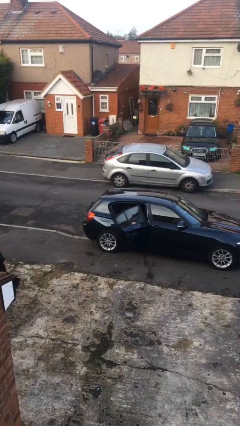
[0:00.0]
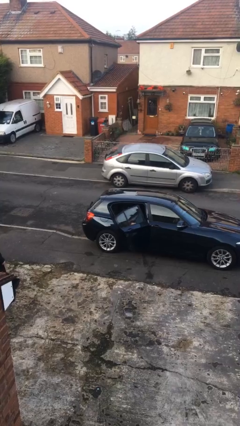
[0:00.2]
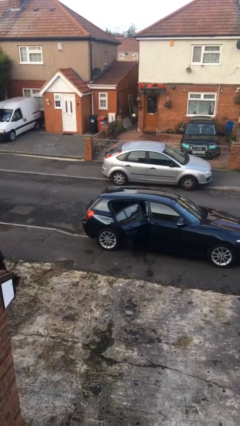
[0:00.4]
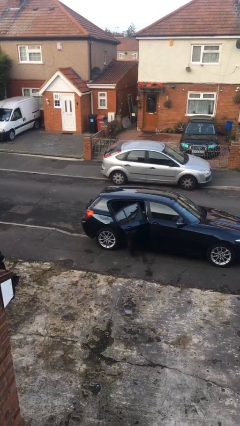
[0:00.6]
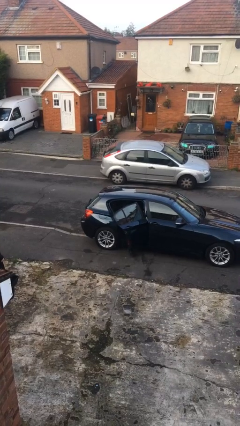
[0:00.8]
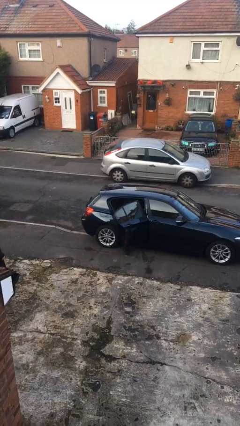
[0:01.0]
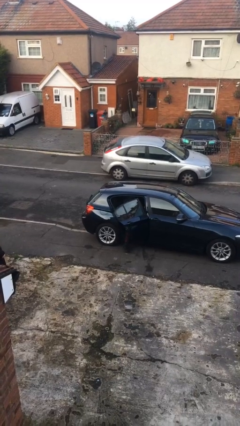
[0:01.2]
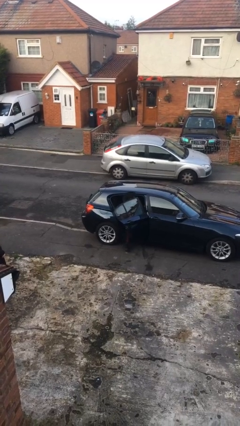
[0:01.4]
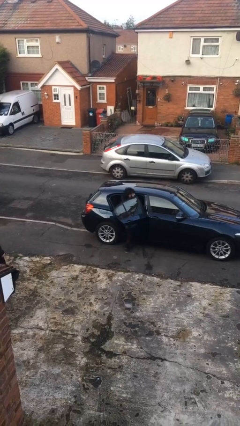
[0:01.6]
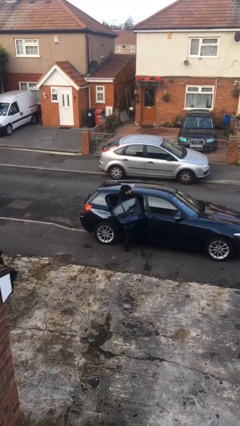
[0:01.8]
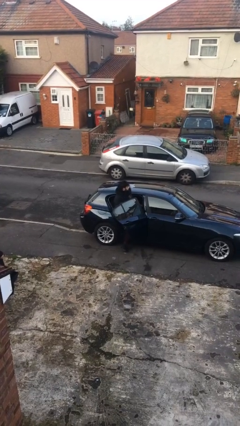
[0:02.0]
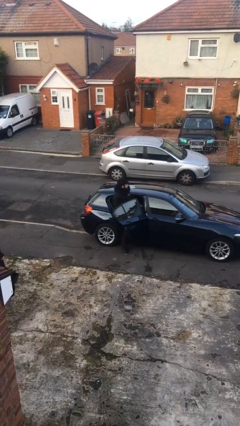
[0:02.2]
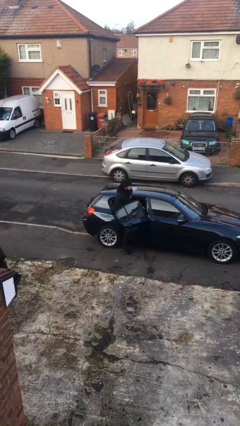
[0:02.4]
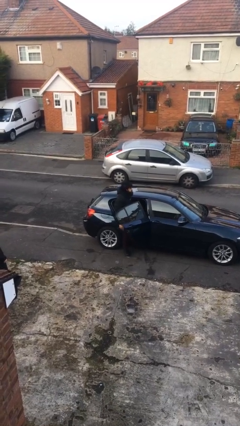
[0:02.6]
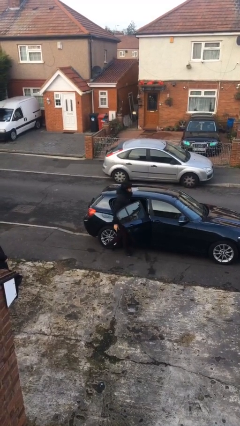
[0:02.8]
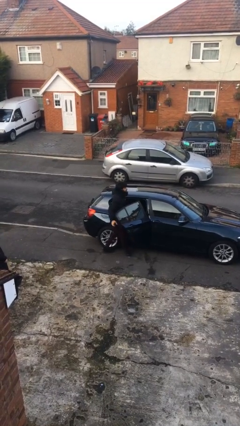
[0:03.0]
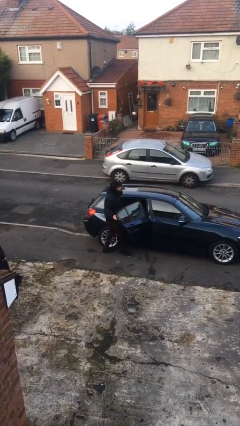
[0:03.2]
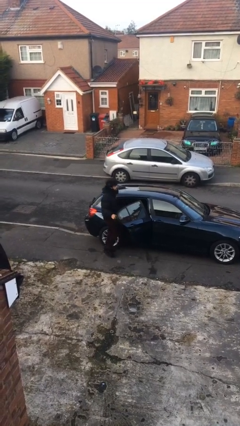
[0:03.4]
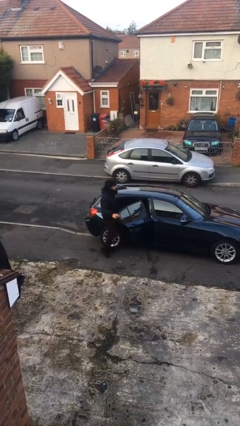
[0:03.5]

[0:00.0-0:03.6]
person exits car

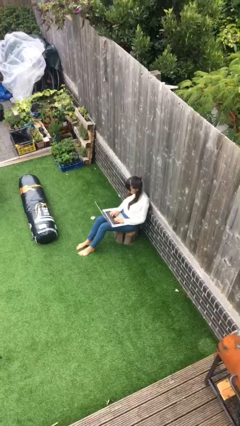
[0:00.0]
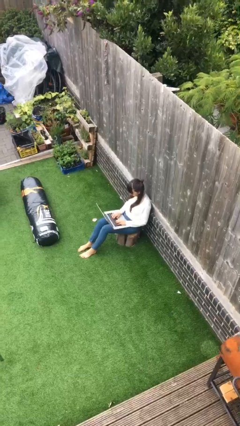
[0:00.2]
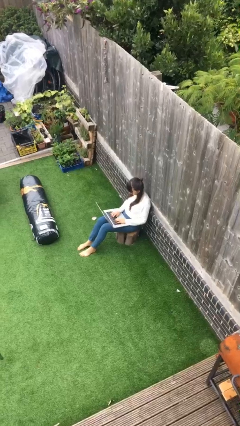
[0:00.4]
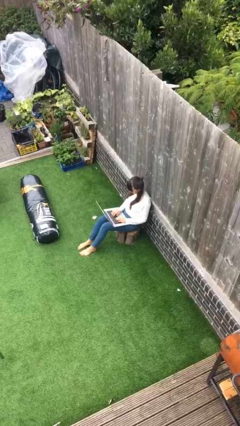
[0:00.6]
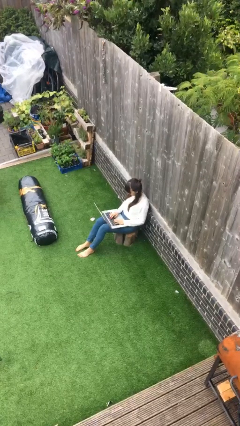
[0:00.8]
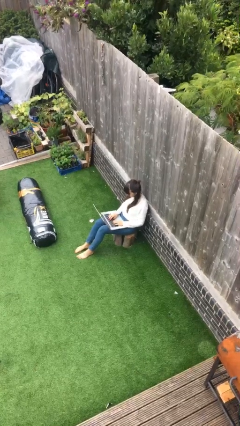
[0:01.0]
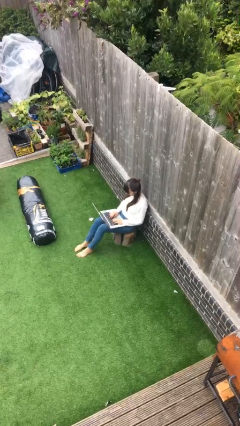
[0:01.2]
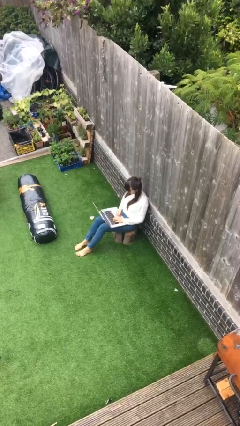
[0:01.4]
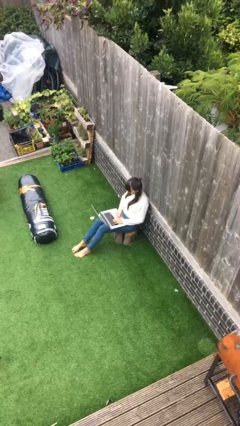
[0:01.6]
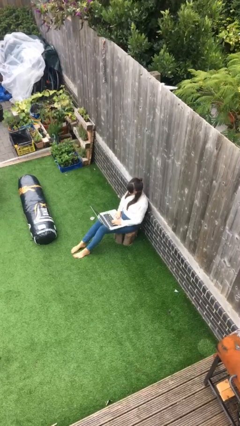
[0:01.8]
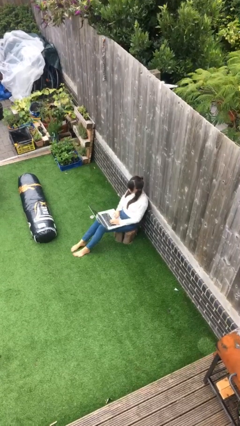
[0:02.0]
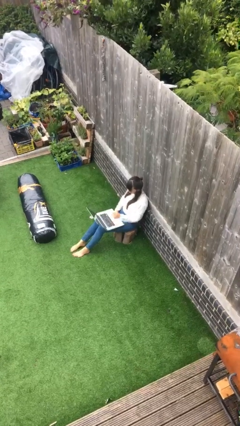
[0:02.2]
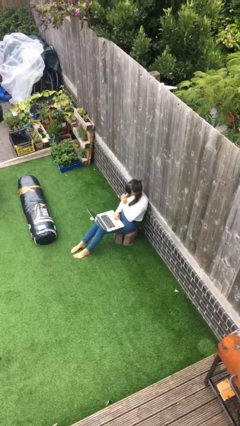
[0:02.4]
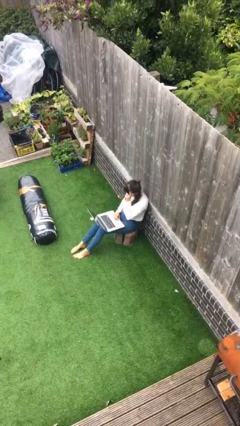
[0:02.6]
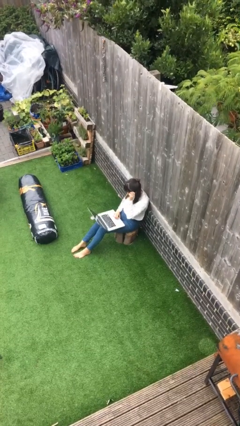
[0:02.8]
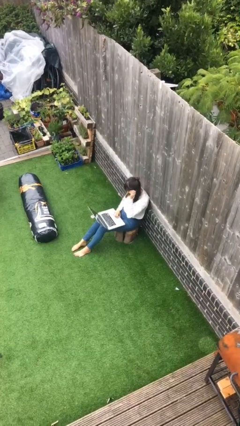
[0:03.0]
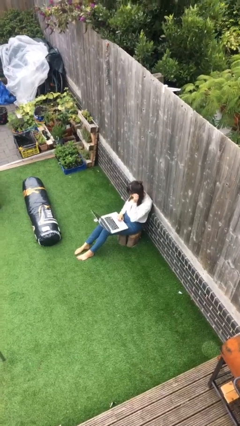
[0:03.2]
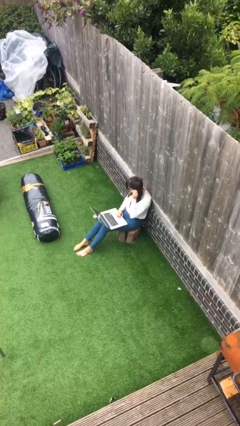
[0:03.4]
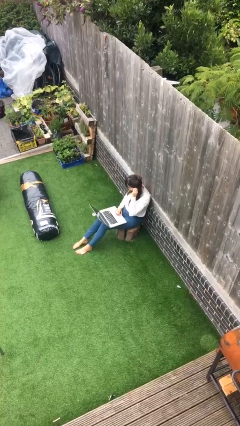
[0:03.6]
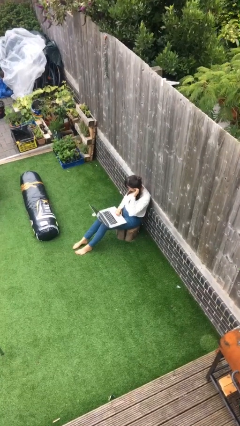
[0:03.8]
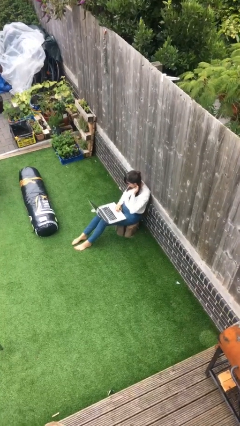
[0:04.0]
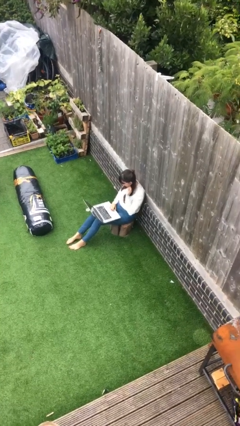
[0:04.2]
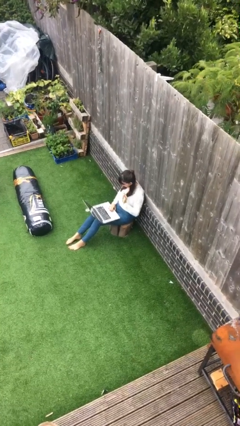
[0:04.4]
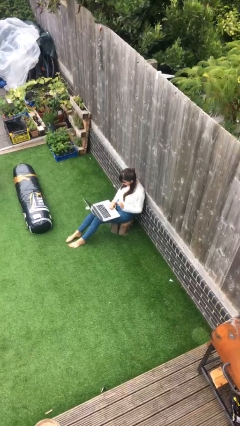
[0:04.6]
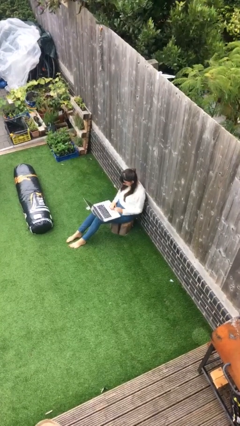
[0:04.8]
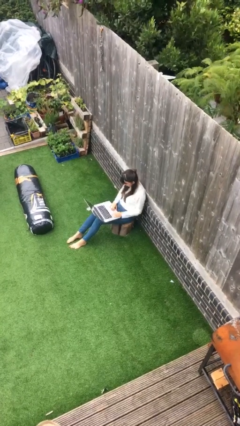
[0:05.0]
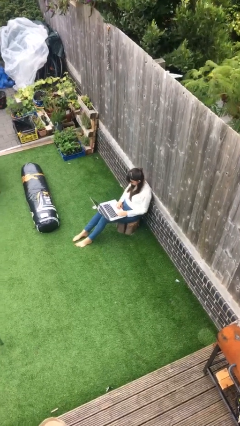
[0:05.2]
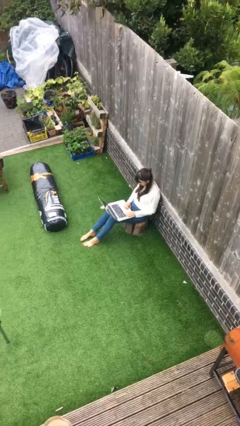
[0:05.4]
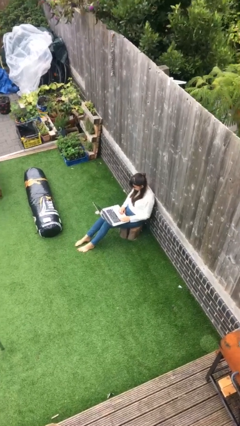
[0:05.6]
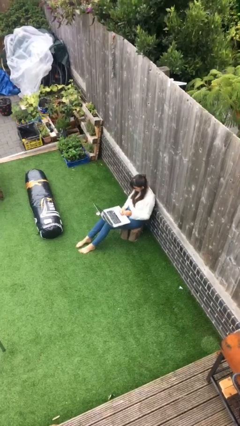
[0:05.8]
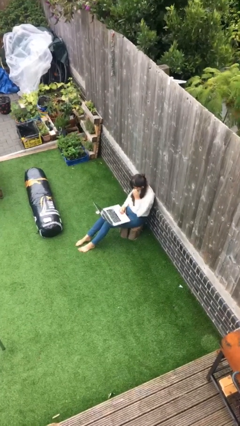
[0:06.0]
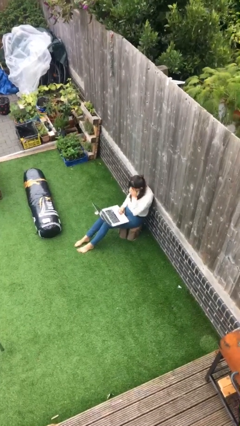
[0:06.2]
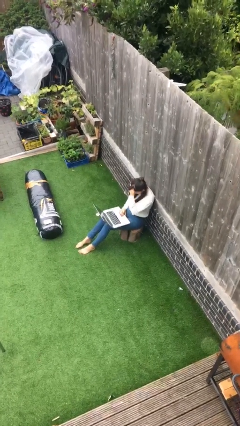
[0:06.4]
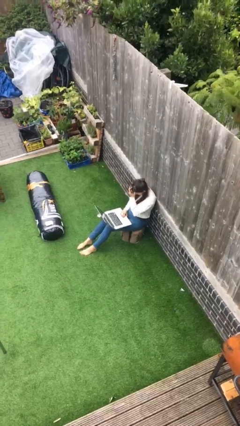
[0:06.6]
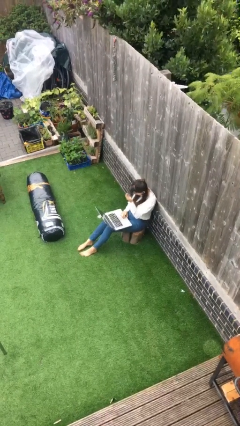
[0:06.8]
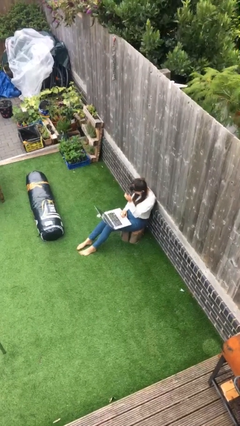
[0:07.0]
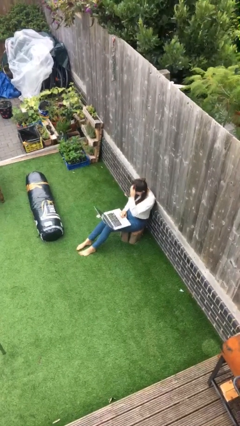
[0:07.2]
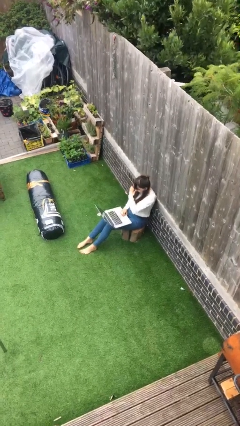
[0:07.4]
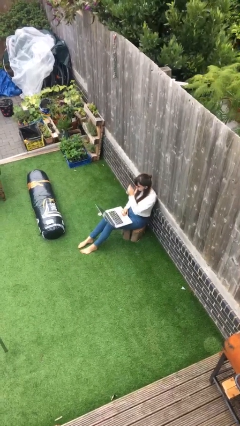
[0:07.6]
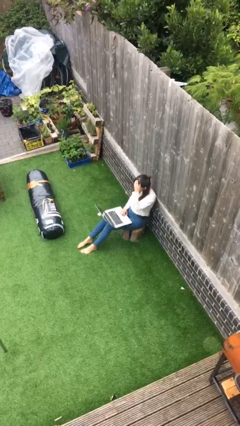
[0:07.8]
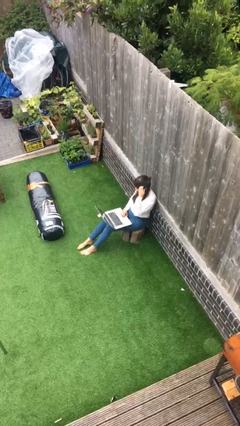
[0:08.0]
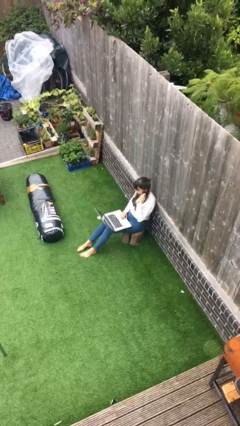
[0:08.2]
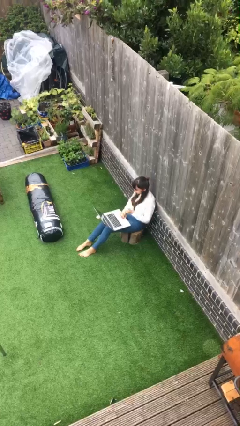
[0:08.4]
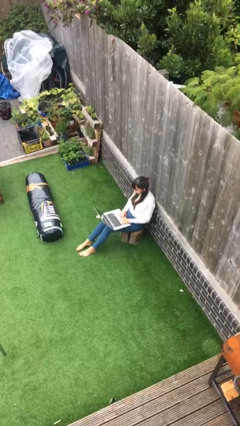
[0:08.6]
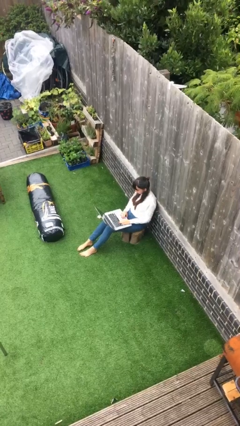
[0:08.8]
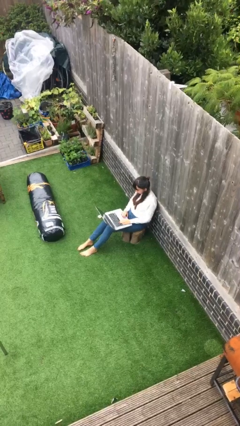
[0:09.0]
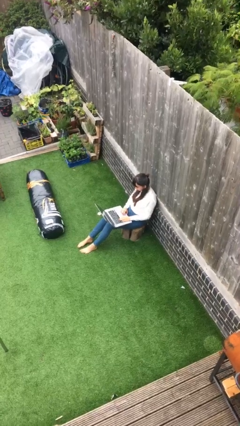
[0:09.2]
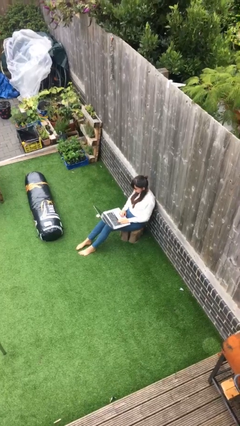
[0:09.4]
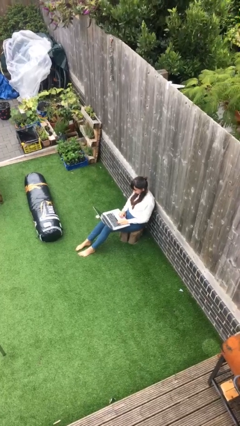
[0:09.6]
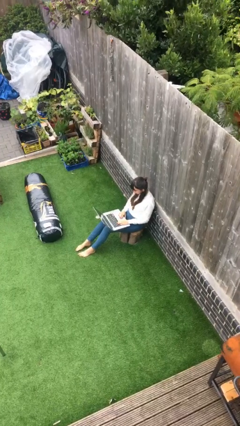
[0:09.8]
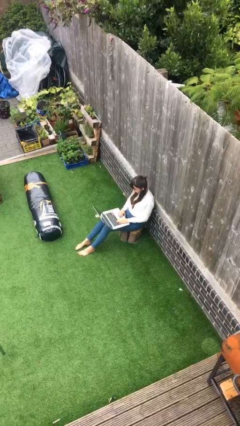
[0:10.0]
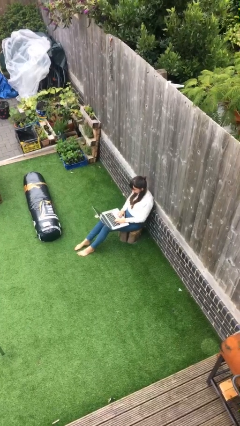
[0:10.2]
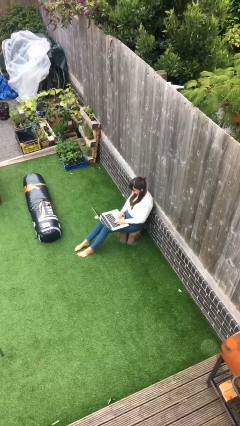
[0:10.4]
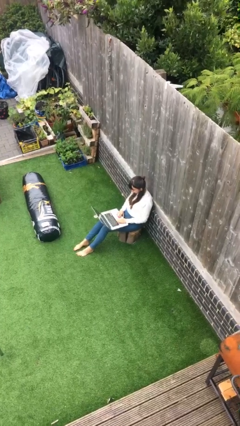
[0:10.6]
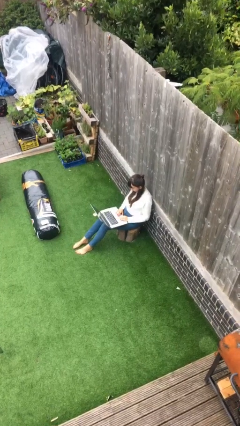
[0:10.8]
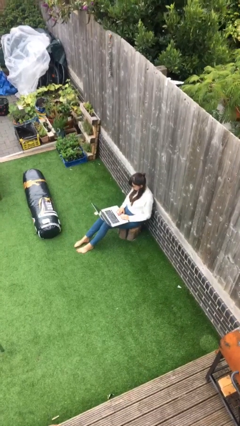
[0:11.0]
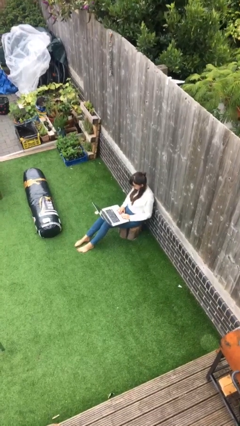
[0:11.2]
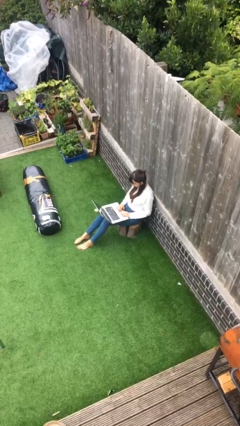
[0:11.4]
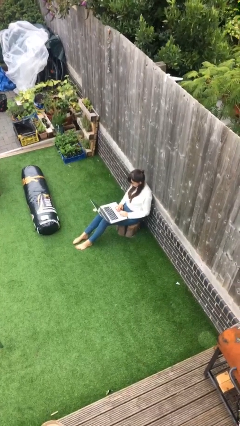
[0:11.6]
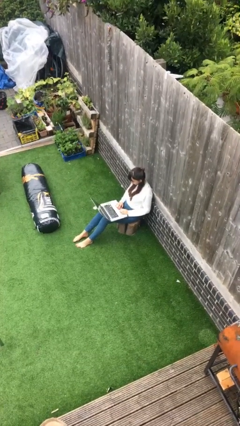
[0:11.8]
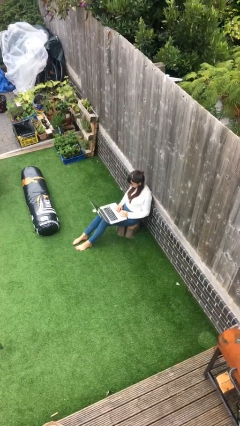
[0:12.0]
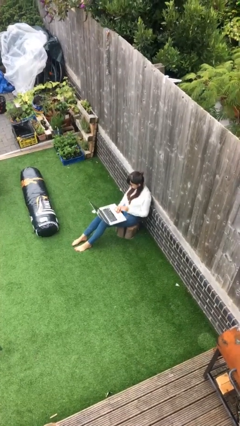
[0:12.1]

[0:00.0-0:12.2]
person interacts with laptop

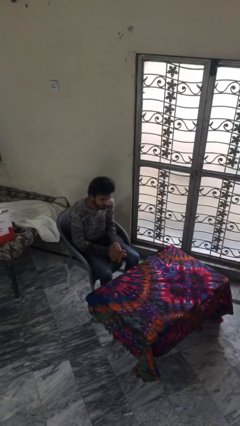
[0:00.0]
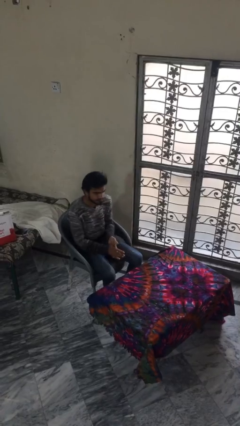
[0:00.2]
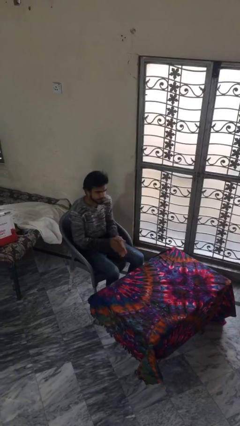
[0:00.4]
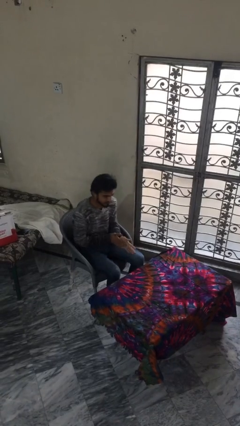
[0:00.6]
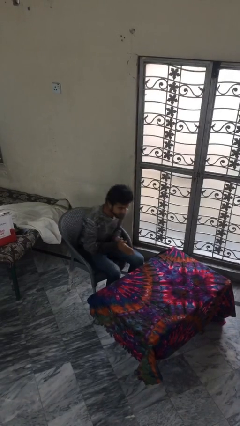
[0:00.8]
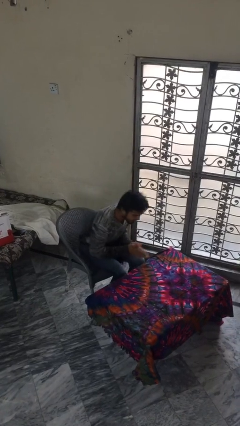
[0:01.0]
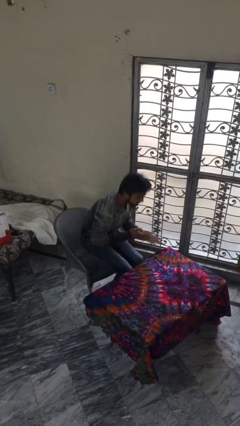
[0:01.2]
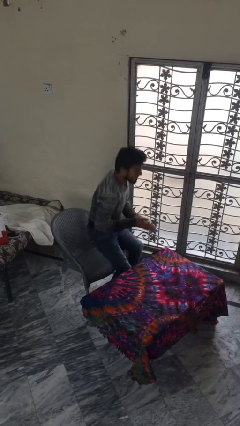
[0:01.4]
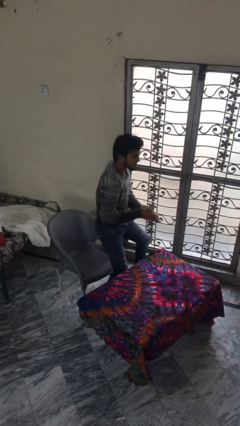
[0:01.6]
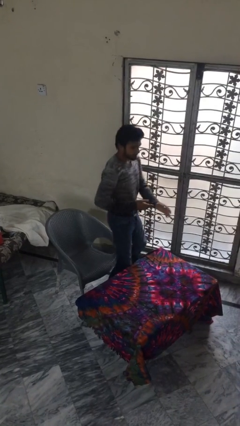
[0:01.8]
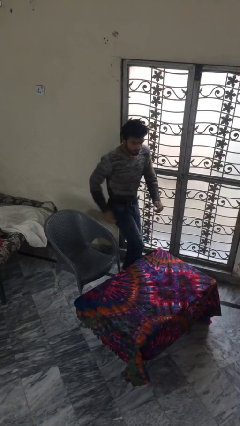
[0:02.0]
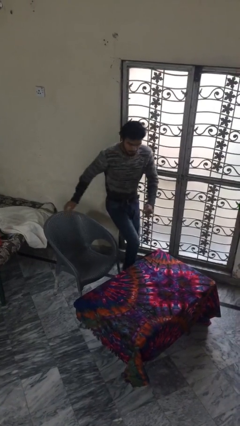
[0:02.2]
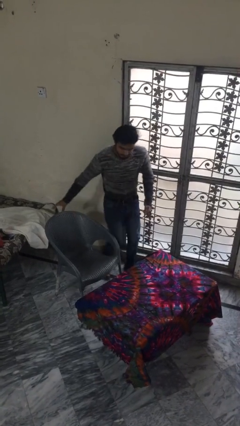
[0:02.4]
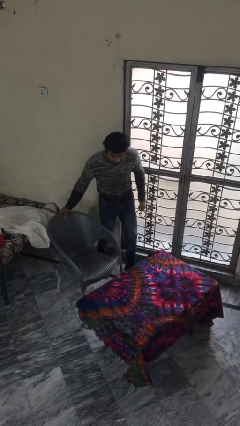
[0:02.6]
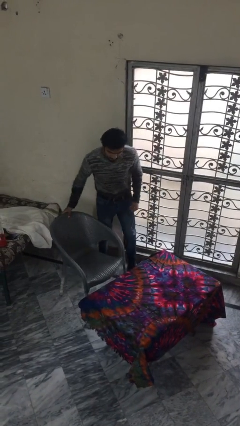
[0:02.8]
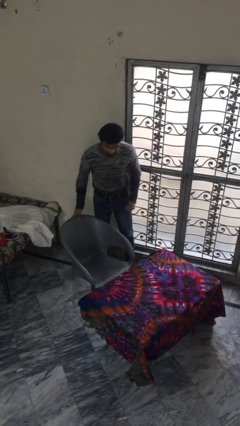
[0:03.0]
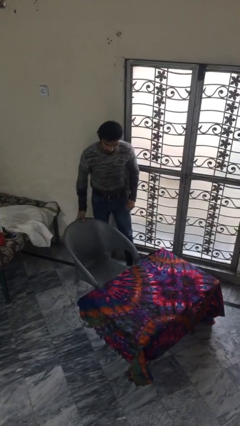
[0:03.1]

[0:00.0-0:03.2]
person stands up
